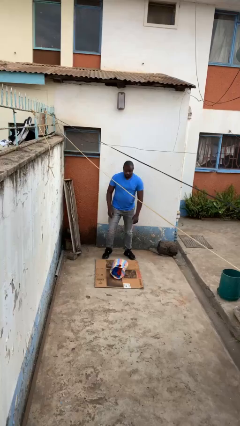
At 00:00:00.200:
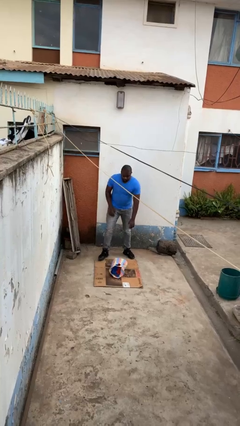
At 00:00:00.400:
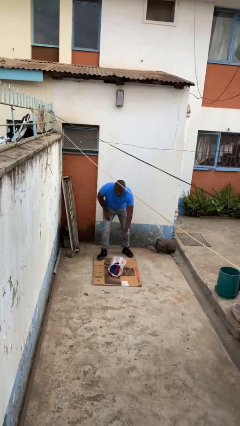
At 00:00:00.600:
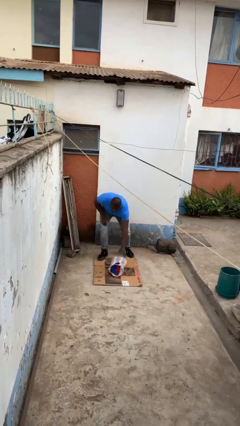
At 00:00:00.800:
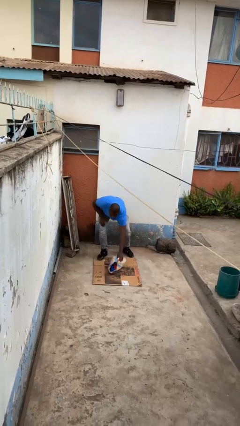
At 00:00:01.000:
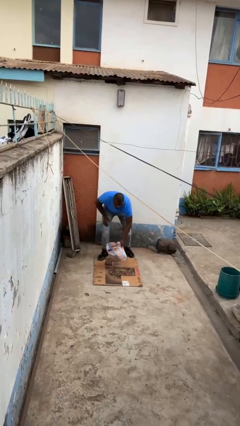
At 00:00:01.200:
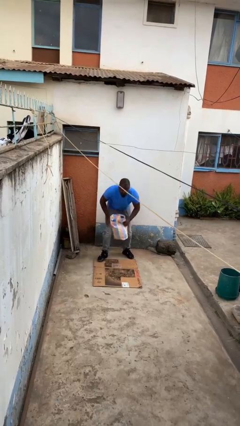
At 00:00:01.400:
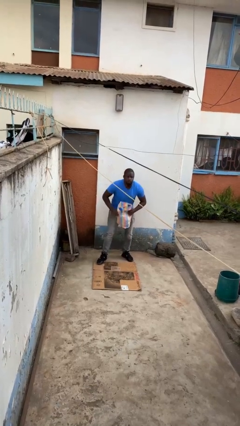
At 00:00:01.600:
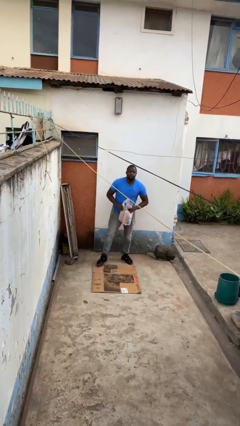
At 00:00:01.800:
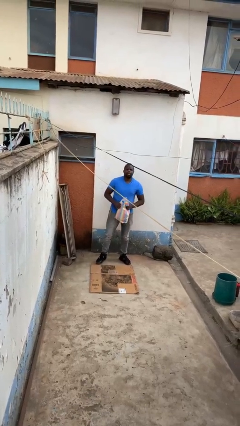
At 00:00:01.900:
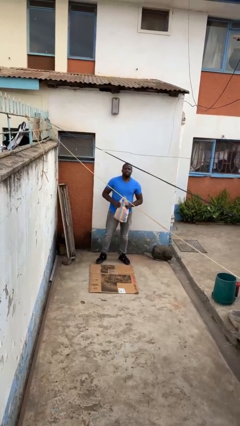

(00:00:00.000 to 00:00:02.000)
person picks up object from floor

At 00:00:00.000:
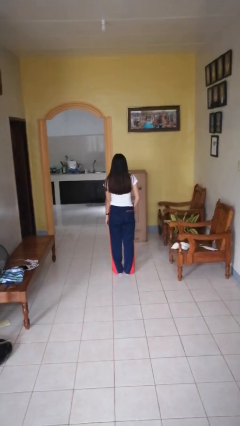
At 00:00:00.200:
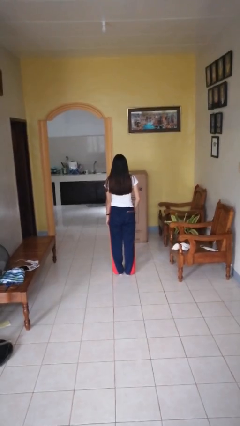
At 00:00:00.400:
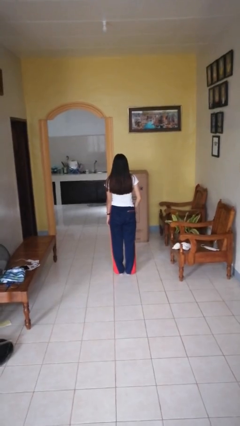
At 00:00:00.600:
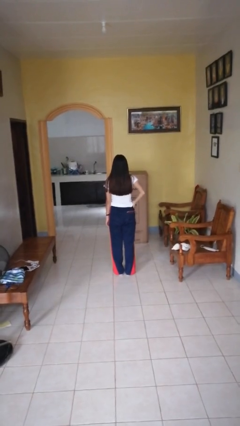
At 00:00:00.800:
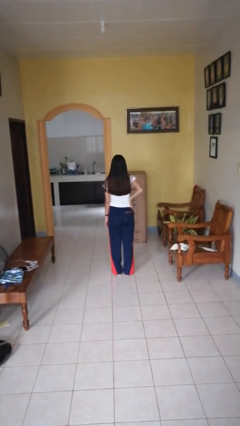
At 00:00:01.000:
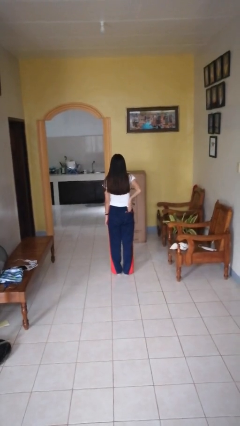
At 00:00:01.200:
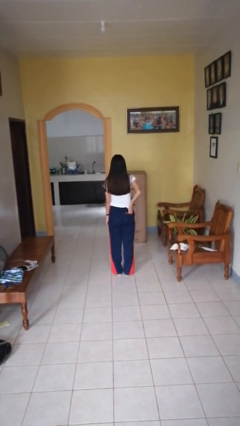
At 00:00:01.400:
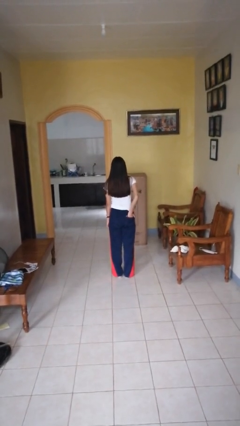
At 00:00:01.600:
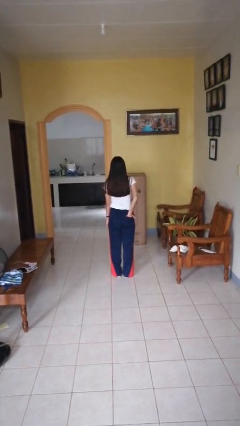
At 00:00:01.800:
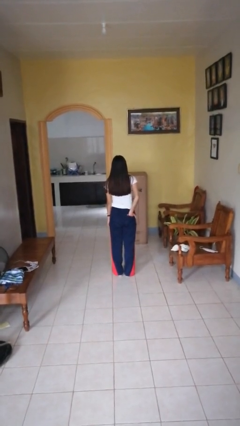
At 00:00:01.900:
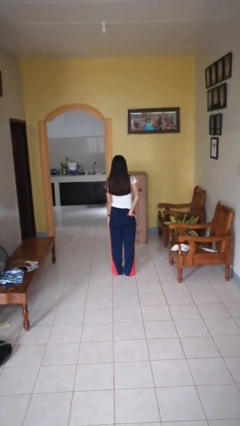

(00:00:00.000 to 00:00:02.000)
person puts hands in back pockets

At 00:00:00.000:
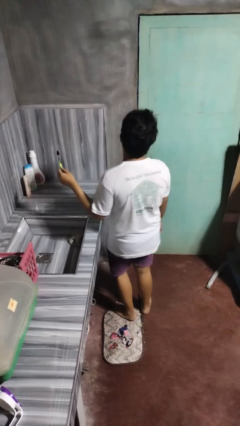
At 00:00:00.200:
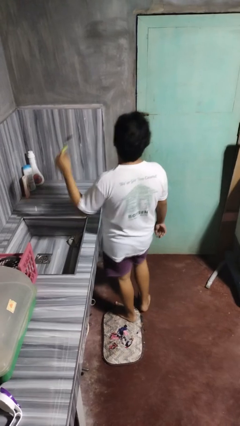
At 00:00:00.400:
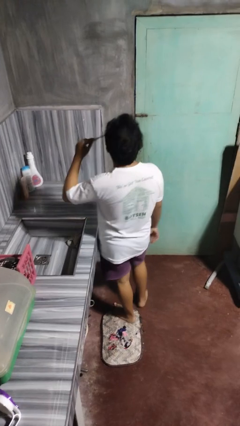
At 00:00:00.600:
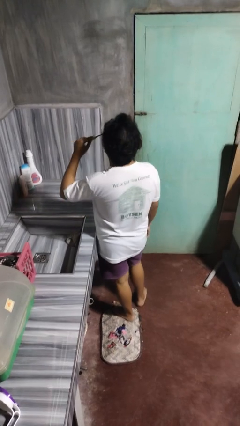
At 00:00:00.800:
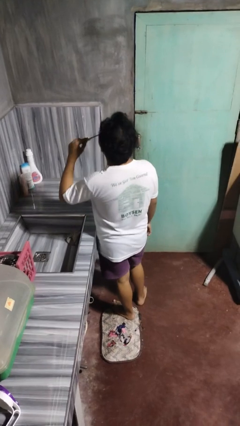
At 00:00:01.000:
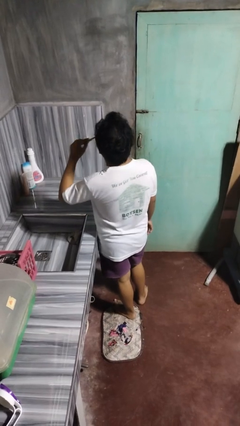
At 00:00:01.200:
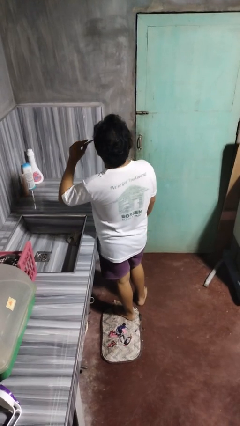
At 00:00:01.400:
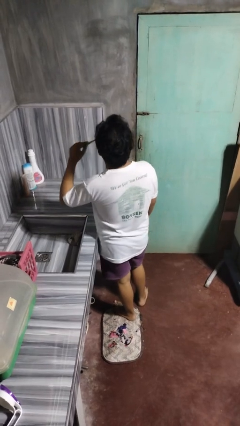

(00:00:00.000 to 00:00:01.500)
person brushes teeth

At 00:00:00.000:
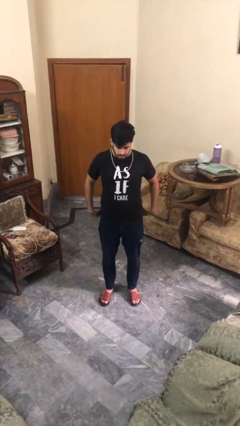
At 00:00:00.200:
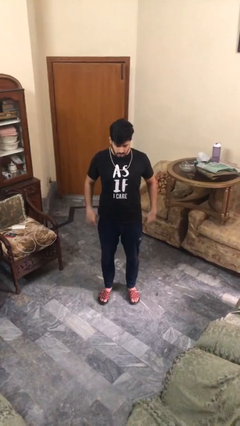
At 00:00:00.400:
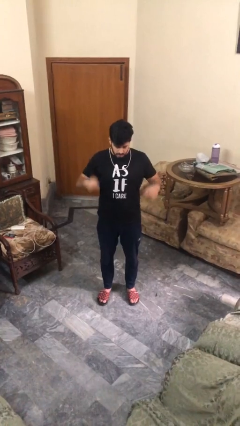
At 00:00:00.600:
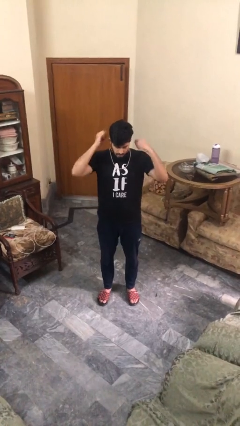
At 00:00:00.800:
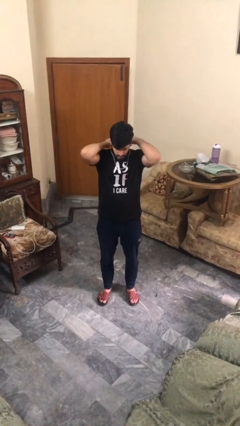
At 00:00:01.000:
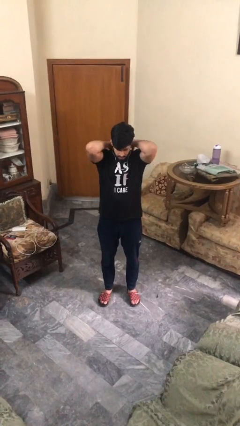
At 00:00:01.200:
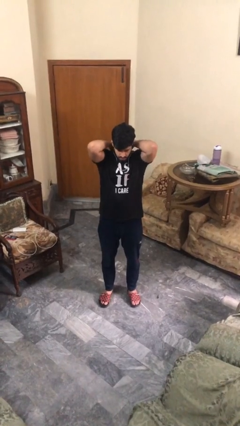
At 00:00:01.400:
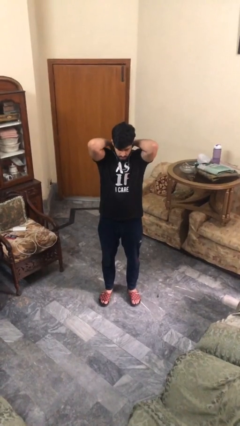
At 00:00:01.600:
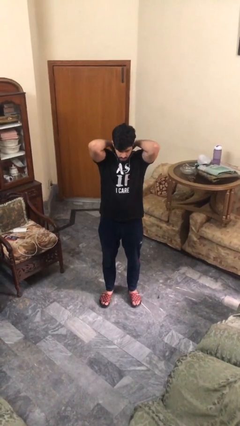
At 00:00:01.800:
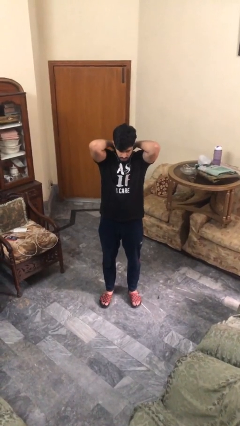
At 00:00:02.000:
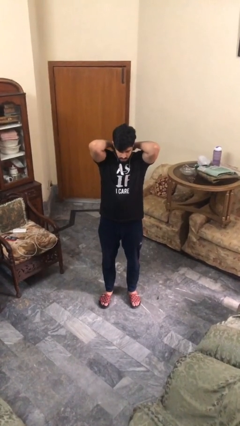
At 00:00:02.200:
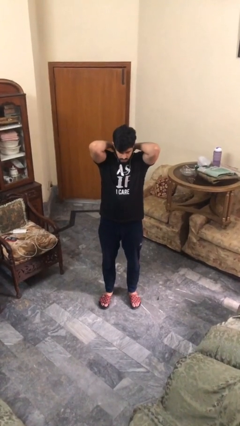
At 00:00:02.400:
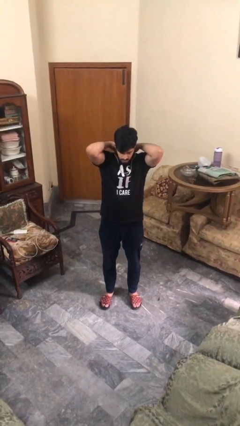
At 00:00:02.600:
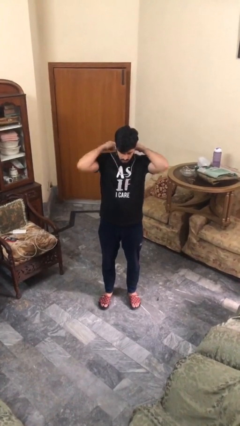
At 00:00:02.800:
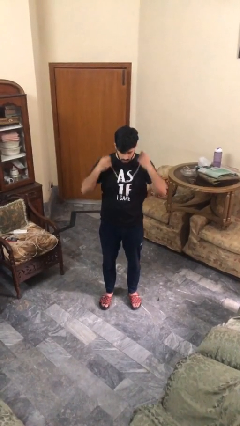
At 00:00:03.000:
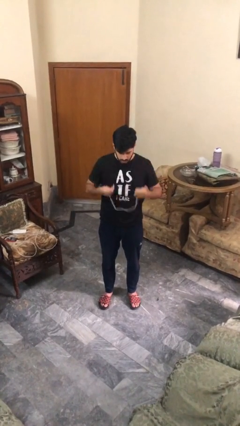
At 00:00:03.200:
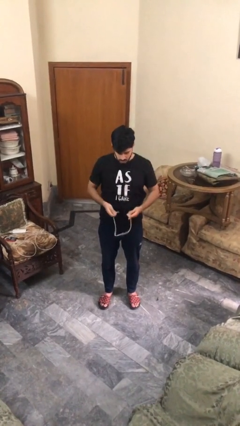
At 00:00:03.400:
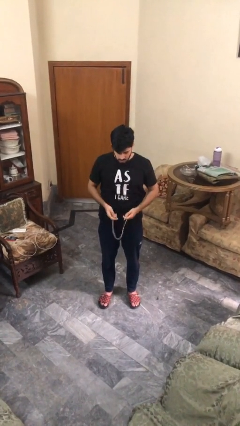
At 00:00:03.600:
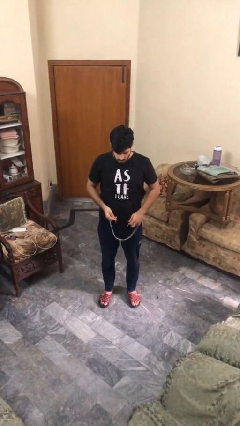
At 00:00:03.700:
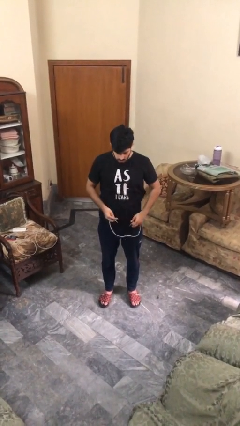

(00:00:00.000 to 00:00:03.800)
person takes off necklace

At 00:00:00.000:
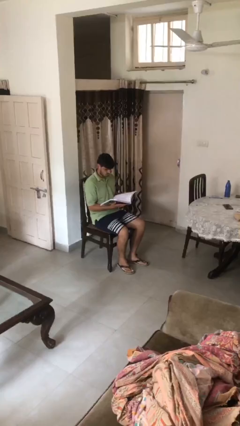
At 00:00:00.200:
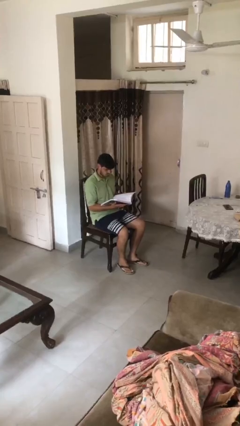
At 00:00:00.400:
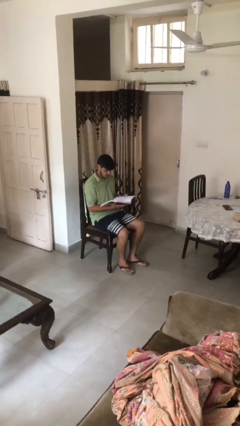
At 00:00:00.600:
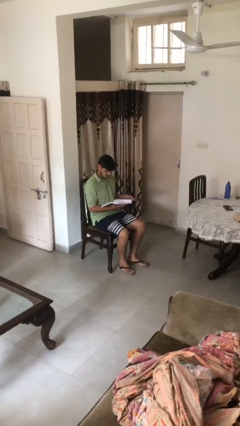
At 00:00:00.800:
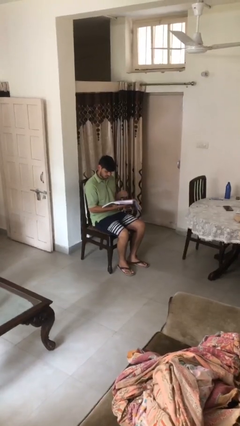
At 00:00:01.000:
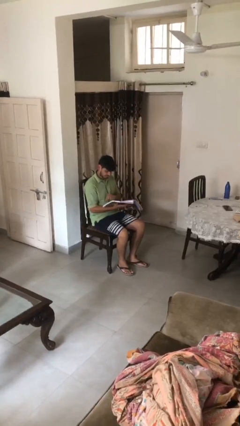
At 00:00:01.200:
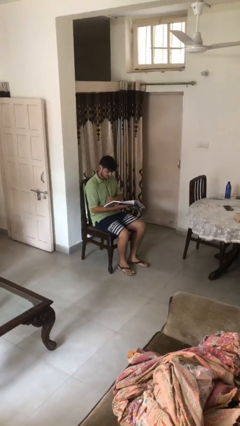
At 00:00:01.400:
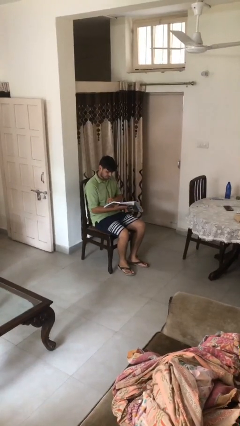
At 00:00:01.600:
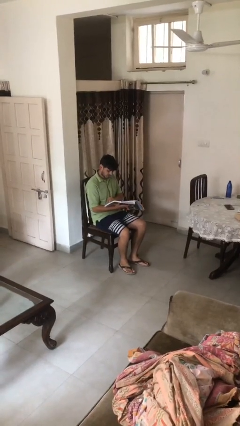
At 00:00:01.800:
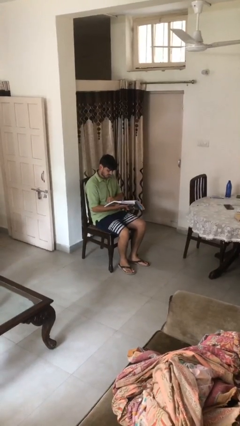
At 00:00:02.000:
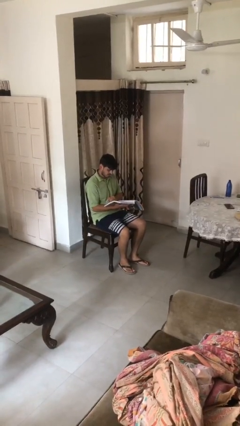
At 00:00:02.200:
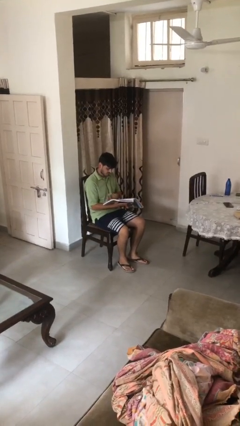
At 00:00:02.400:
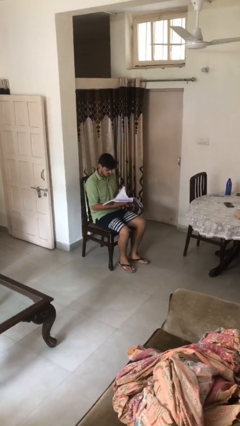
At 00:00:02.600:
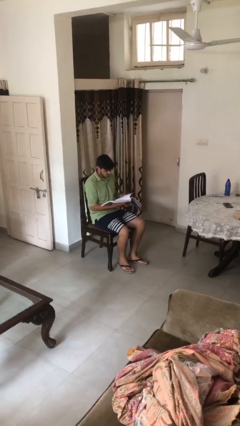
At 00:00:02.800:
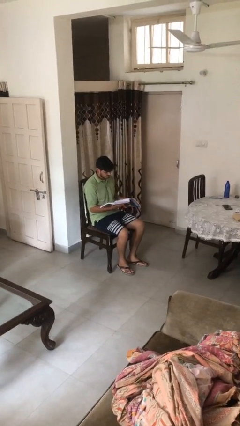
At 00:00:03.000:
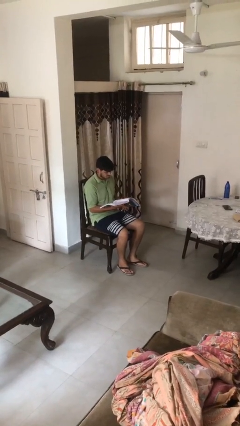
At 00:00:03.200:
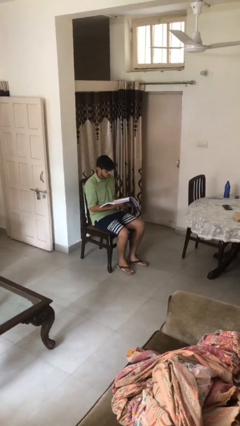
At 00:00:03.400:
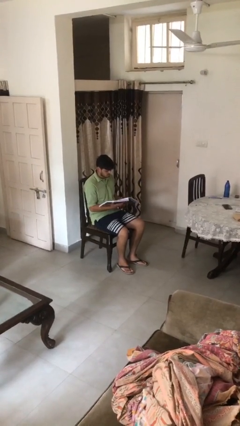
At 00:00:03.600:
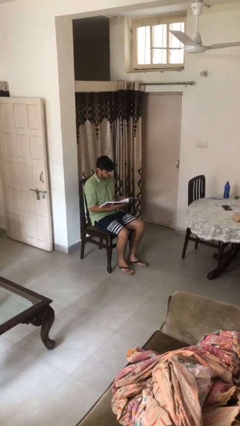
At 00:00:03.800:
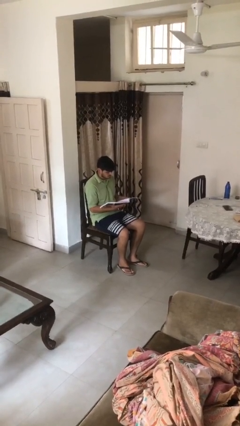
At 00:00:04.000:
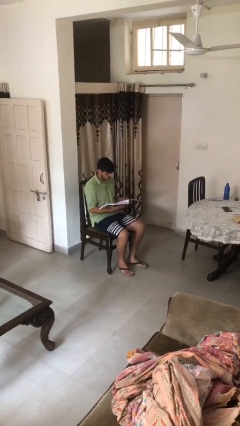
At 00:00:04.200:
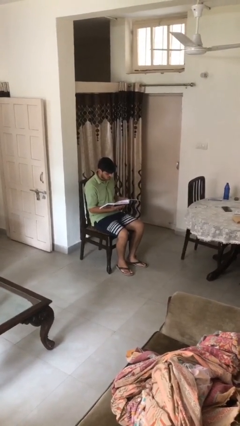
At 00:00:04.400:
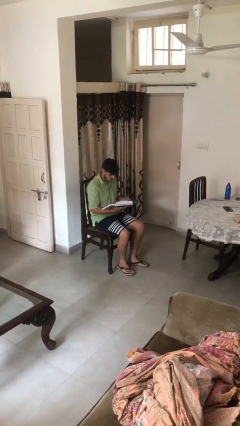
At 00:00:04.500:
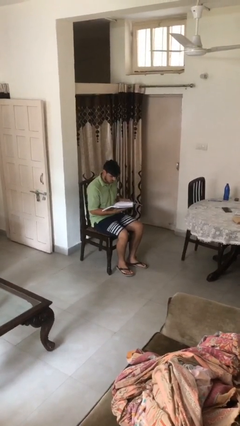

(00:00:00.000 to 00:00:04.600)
person reads document

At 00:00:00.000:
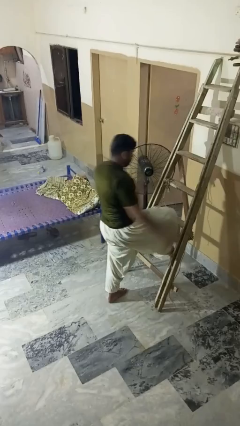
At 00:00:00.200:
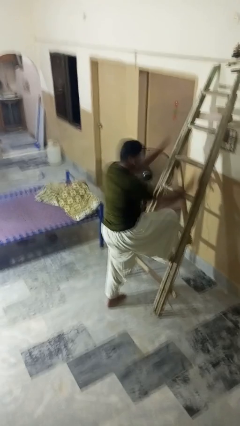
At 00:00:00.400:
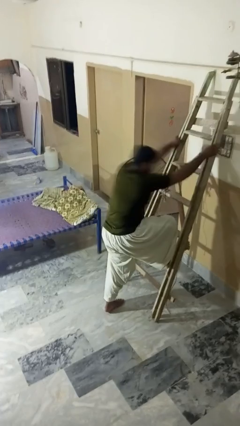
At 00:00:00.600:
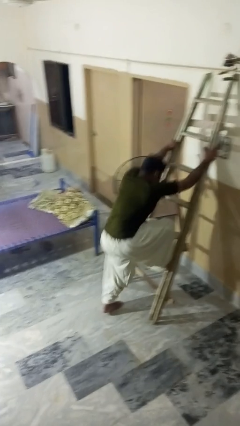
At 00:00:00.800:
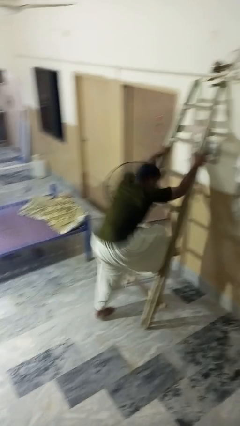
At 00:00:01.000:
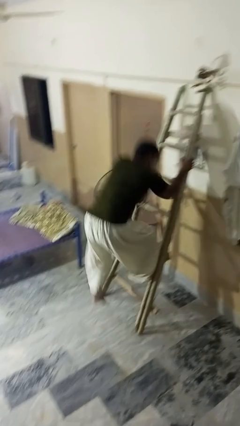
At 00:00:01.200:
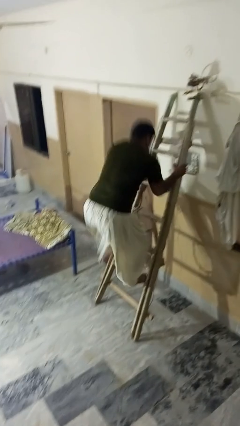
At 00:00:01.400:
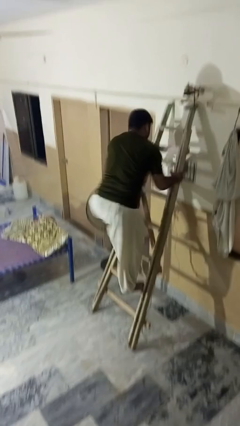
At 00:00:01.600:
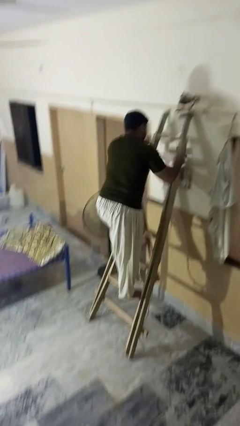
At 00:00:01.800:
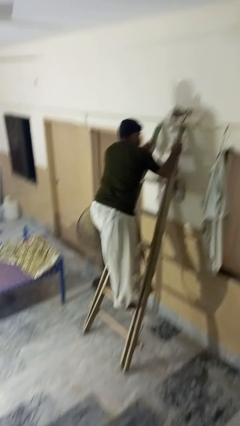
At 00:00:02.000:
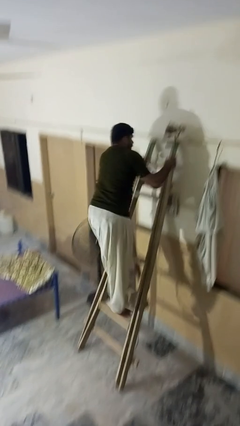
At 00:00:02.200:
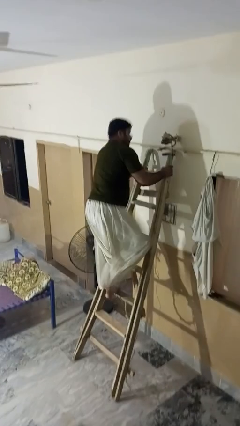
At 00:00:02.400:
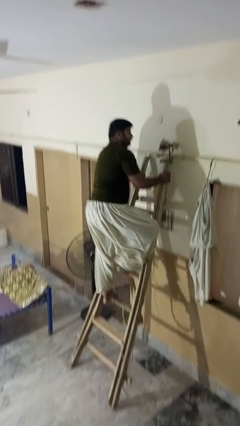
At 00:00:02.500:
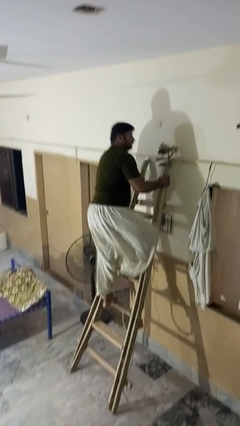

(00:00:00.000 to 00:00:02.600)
person climbs up ladder

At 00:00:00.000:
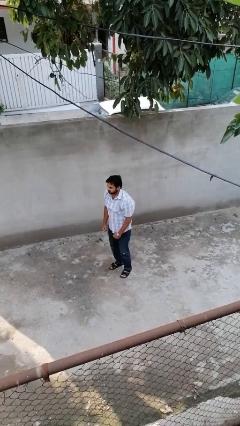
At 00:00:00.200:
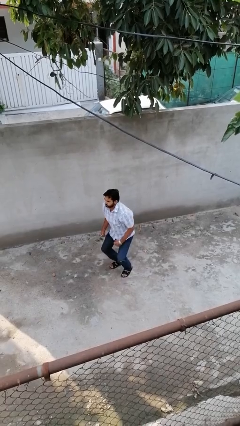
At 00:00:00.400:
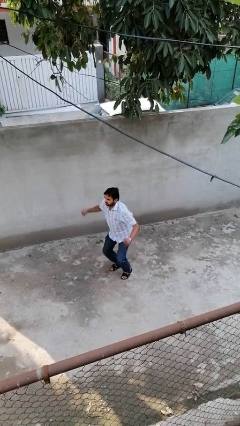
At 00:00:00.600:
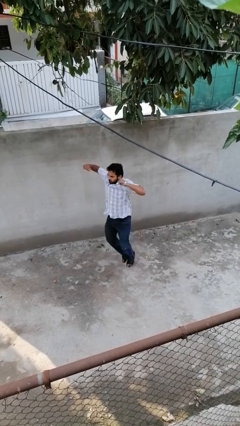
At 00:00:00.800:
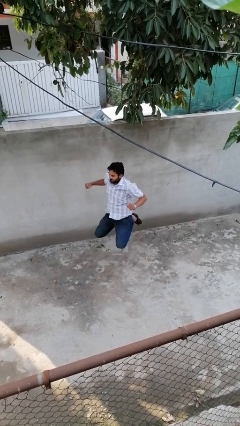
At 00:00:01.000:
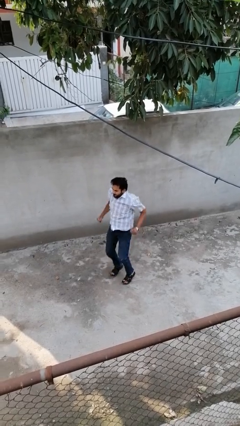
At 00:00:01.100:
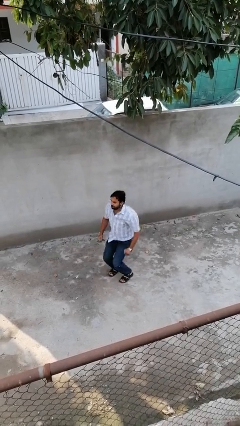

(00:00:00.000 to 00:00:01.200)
person jumps
